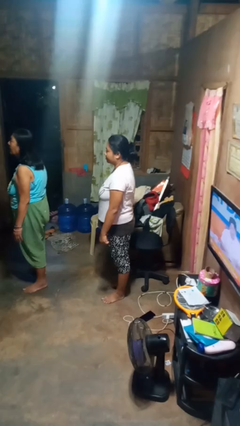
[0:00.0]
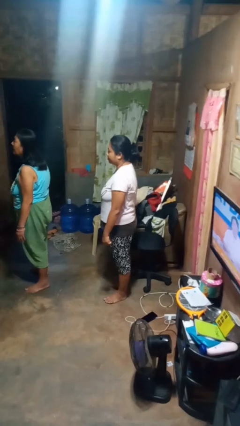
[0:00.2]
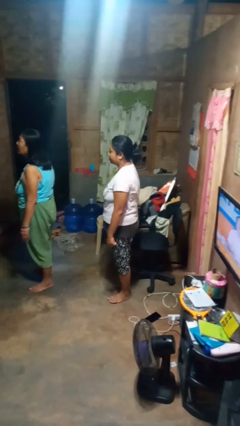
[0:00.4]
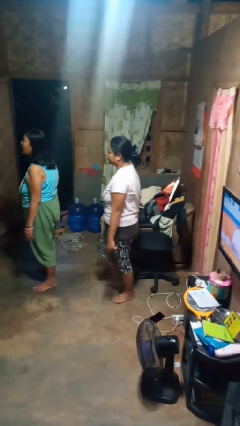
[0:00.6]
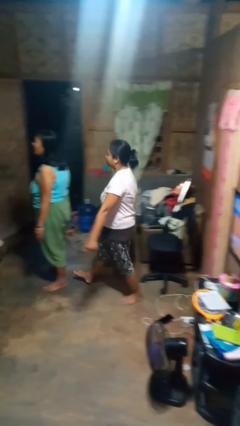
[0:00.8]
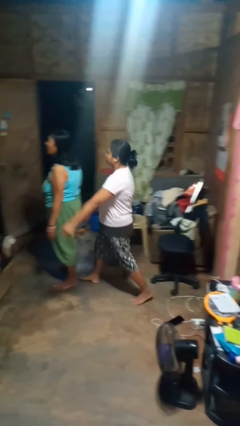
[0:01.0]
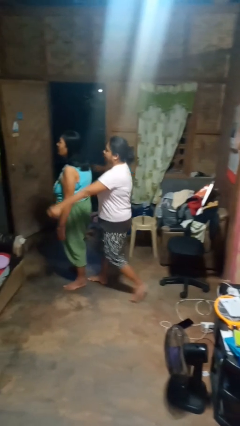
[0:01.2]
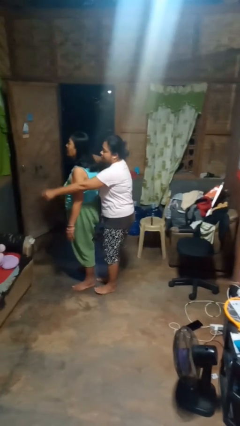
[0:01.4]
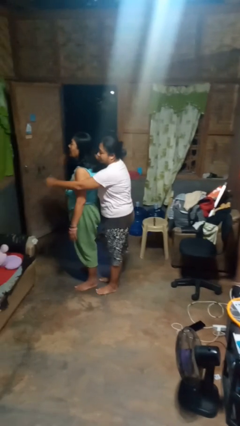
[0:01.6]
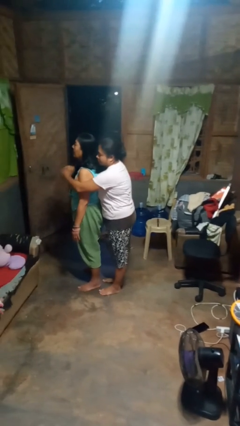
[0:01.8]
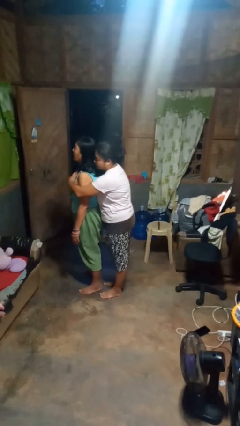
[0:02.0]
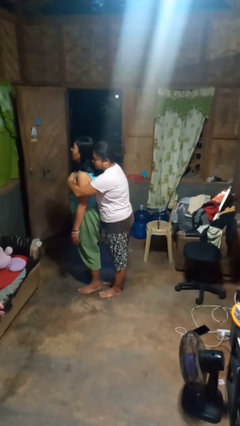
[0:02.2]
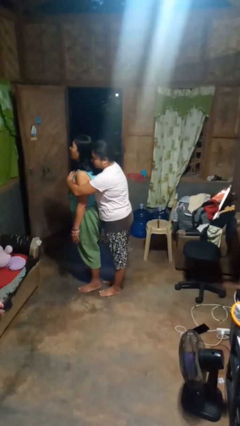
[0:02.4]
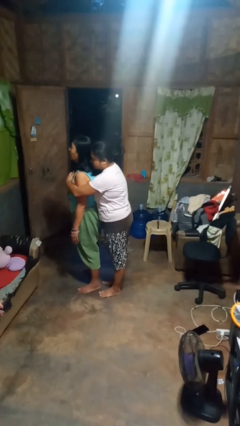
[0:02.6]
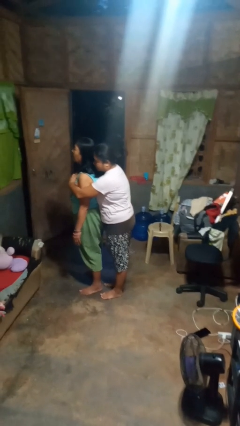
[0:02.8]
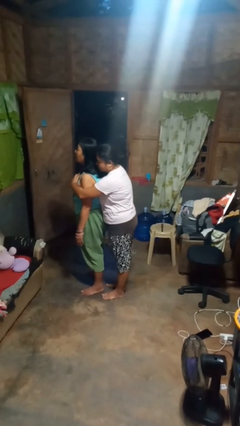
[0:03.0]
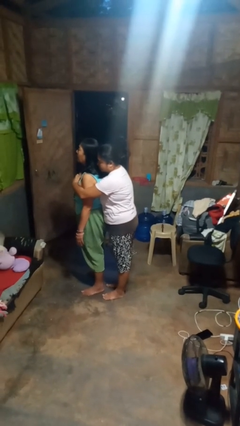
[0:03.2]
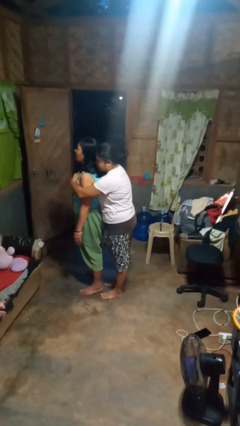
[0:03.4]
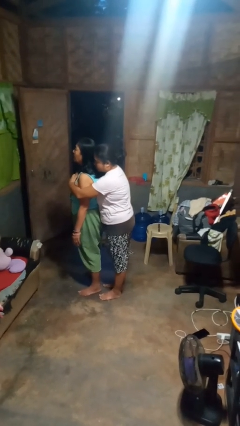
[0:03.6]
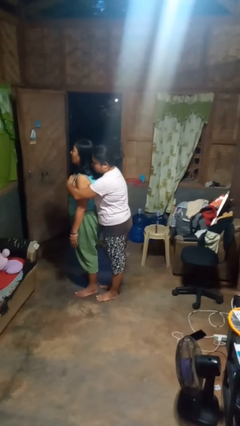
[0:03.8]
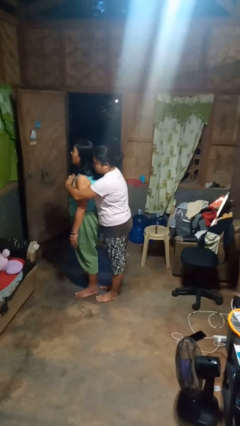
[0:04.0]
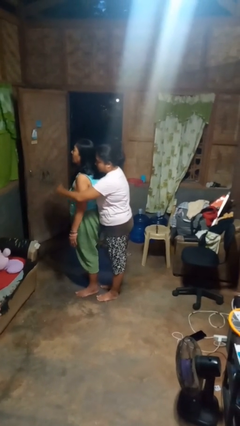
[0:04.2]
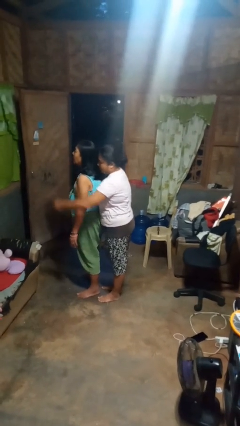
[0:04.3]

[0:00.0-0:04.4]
person hugs person from behind

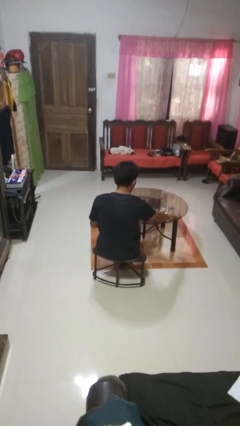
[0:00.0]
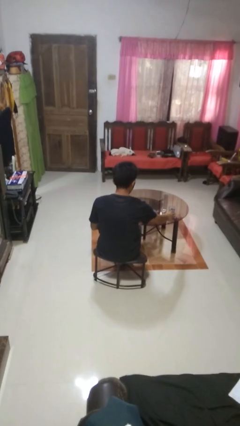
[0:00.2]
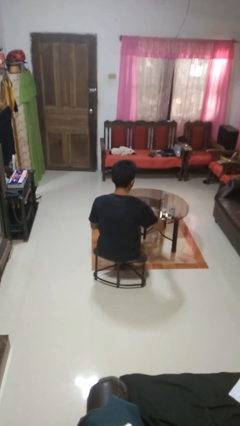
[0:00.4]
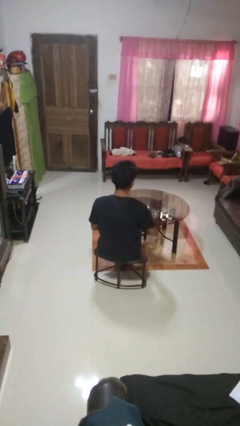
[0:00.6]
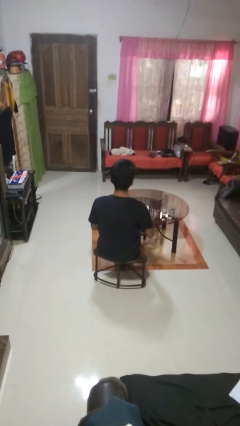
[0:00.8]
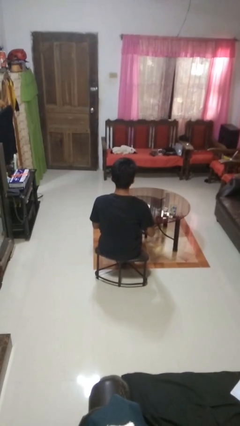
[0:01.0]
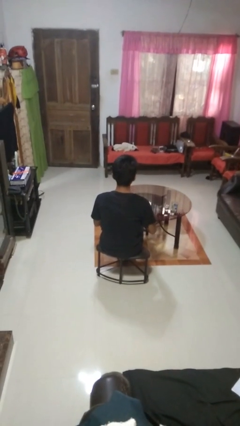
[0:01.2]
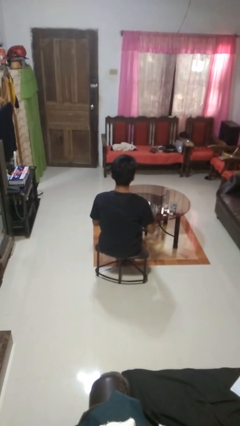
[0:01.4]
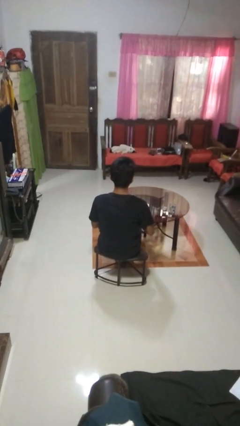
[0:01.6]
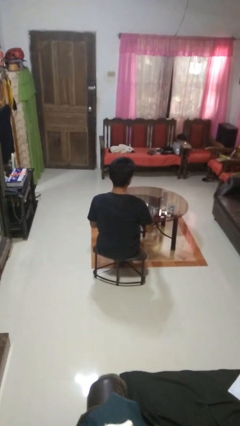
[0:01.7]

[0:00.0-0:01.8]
person puts down object on table

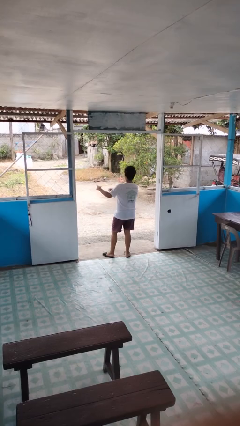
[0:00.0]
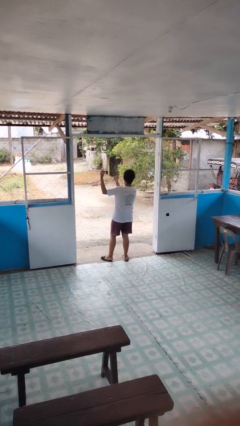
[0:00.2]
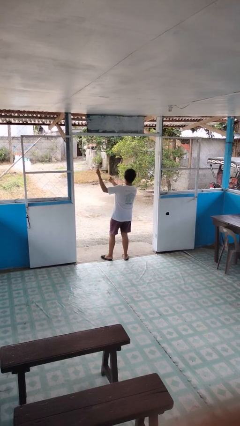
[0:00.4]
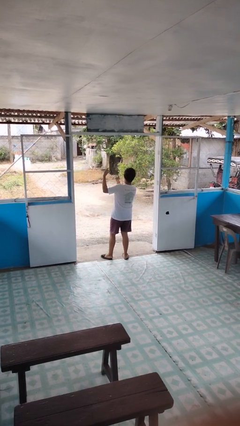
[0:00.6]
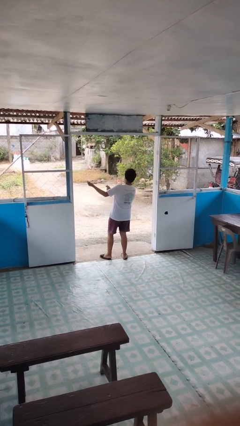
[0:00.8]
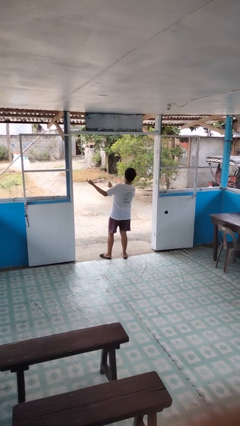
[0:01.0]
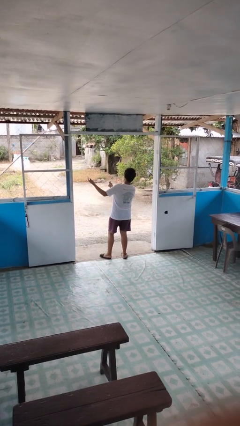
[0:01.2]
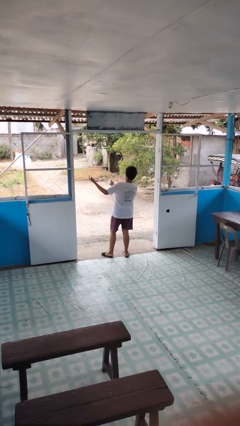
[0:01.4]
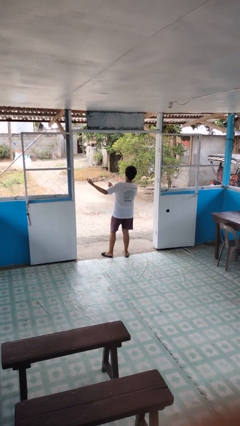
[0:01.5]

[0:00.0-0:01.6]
person snaps fingers

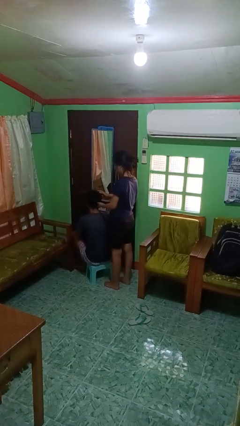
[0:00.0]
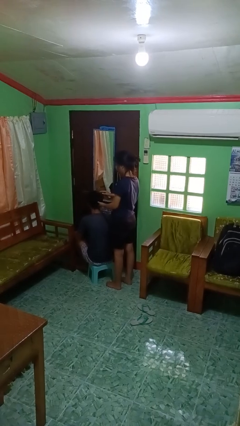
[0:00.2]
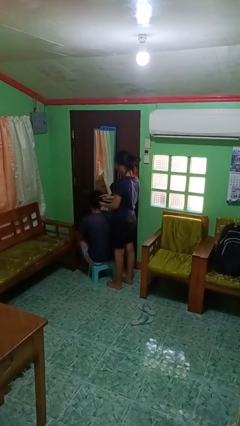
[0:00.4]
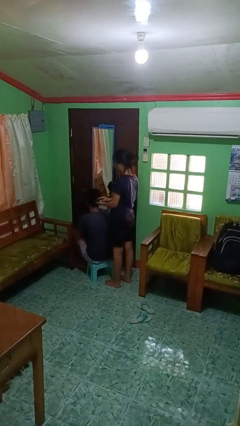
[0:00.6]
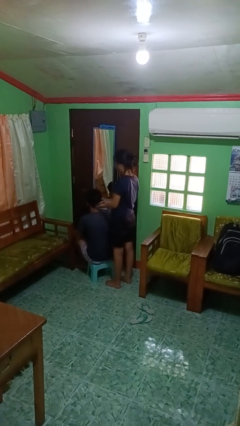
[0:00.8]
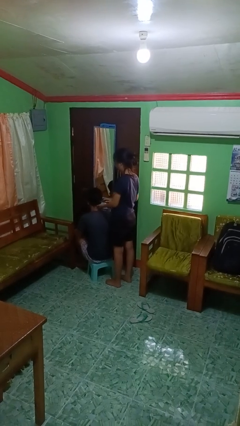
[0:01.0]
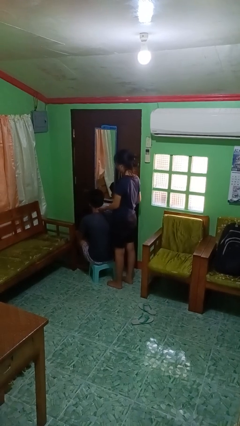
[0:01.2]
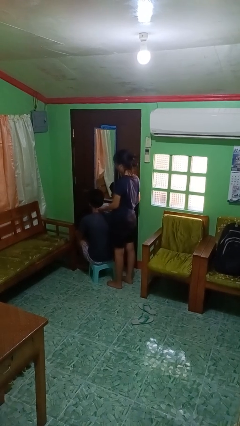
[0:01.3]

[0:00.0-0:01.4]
person brushes hair of person

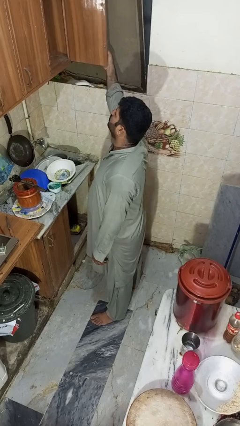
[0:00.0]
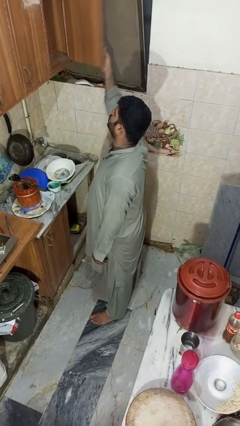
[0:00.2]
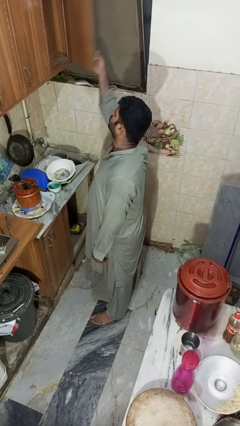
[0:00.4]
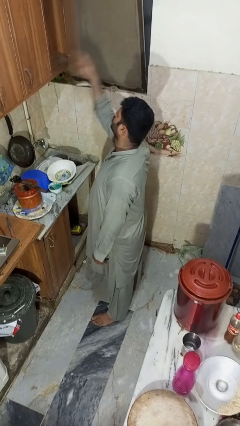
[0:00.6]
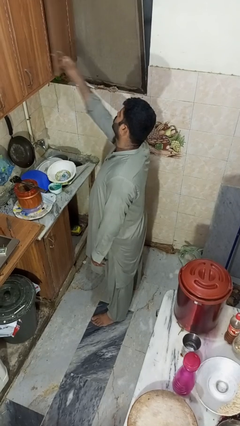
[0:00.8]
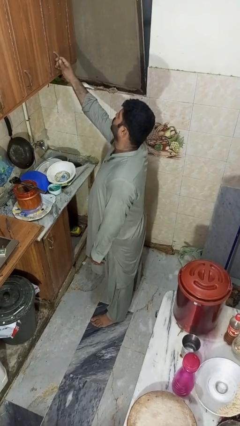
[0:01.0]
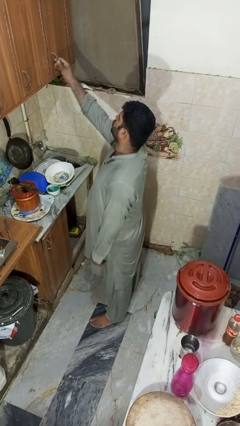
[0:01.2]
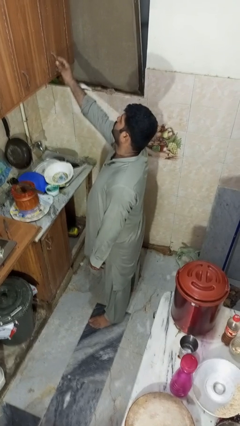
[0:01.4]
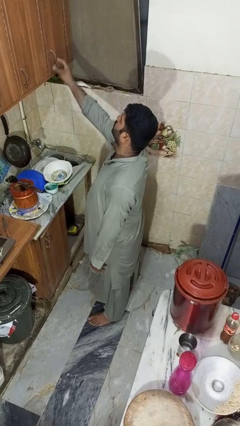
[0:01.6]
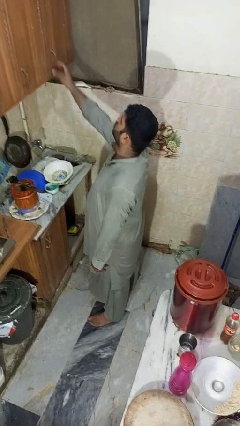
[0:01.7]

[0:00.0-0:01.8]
person closes cabinet

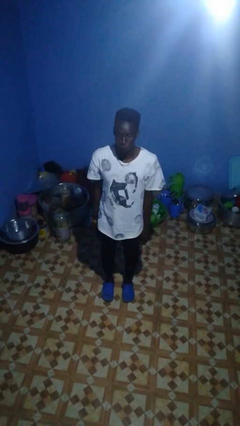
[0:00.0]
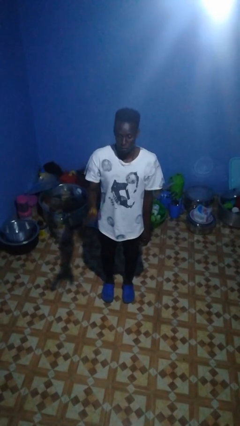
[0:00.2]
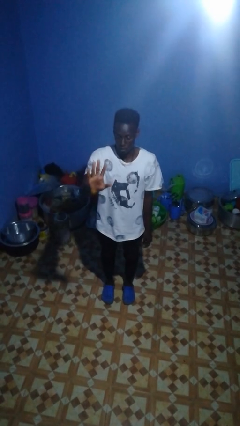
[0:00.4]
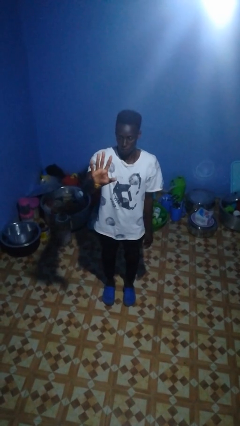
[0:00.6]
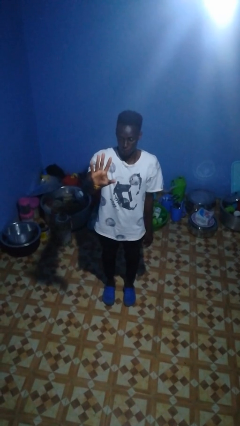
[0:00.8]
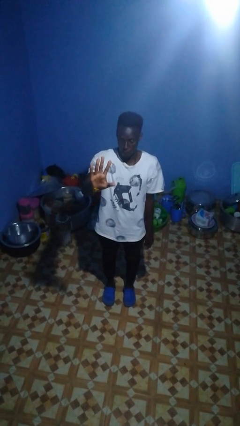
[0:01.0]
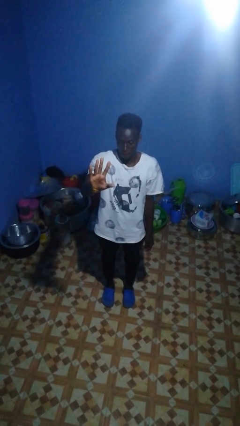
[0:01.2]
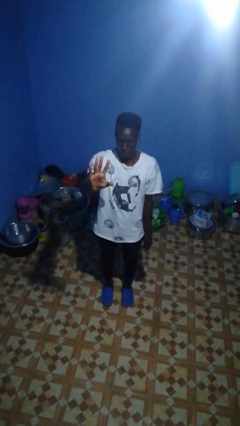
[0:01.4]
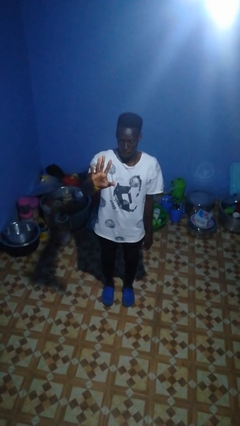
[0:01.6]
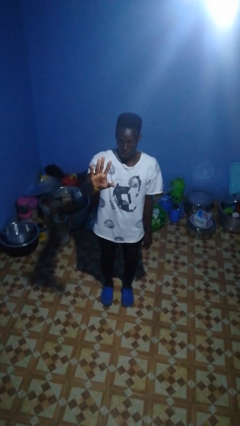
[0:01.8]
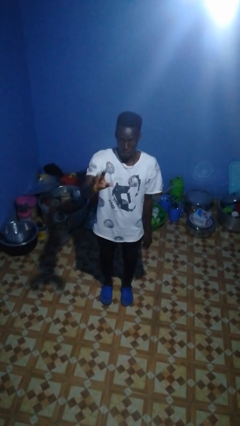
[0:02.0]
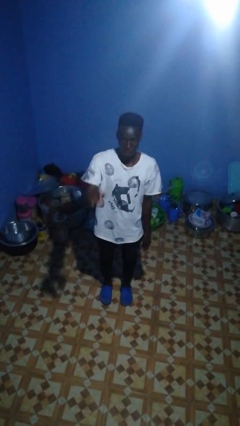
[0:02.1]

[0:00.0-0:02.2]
person gestures number five

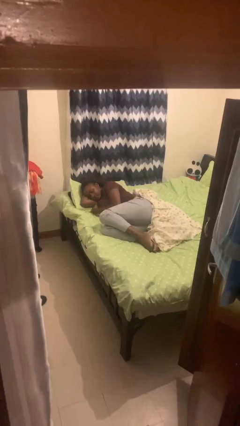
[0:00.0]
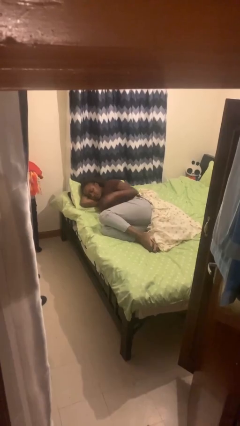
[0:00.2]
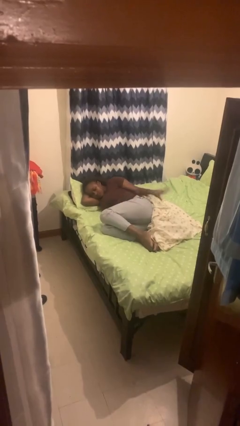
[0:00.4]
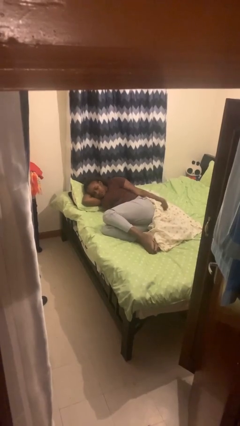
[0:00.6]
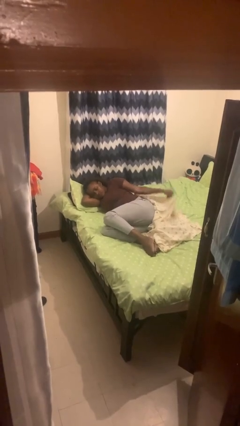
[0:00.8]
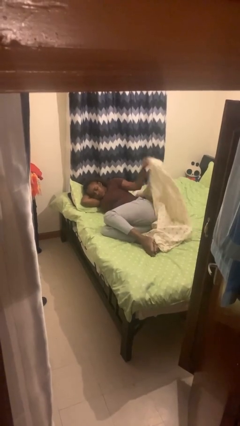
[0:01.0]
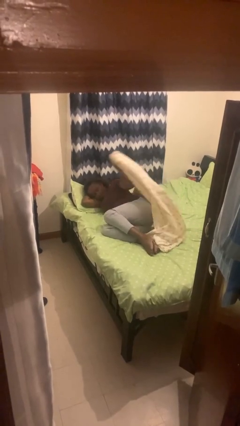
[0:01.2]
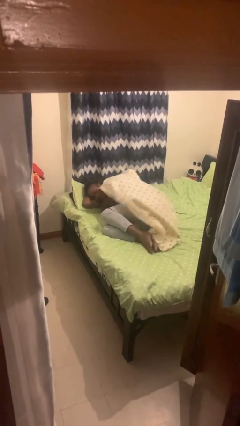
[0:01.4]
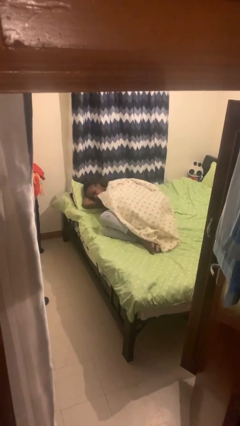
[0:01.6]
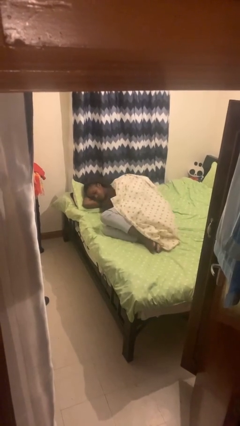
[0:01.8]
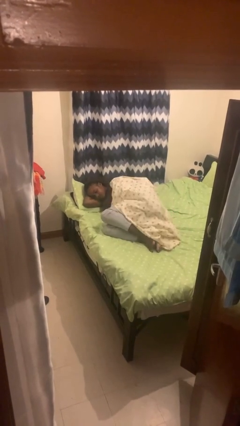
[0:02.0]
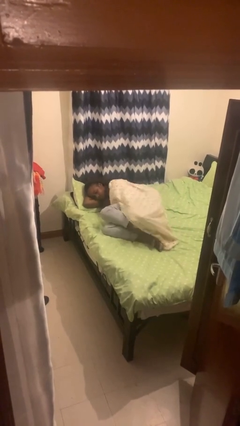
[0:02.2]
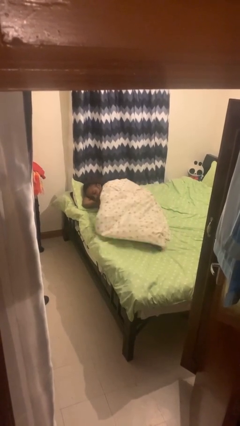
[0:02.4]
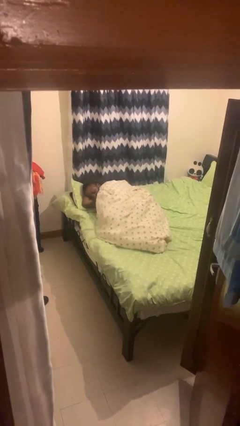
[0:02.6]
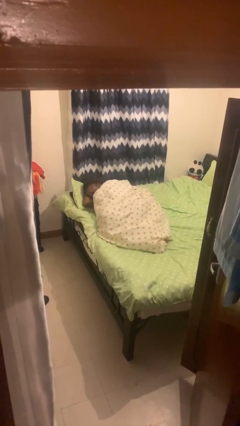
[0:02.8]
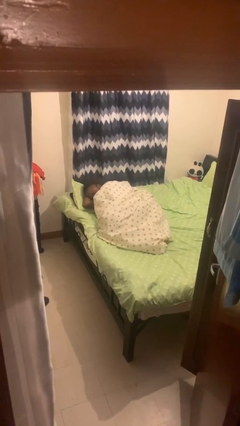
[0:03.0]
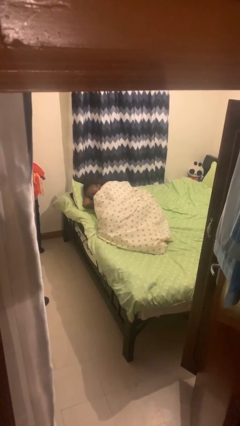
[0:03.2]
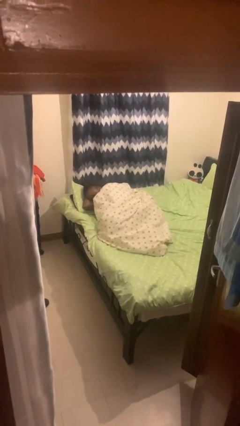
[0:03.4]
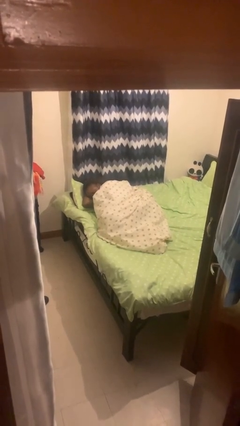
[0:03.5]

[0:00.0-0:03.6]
person covers with bedsheets

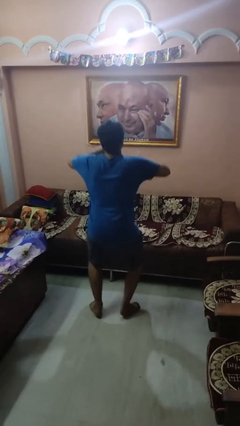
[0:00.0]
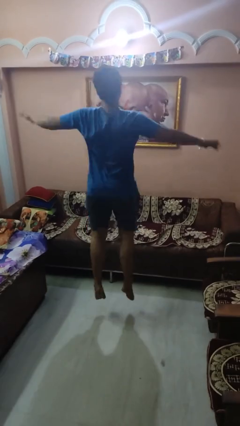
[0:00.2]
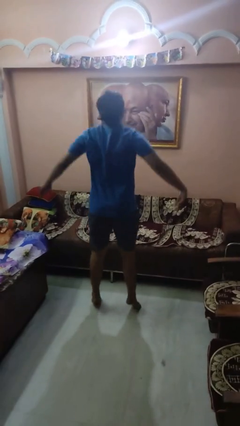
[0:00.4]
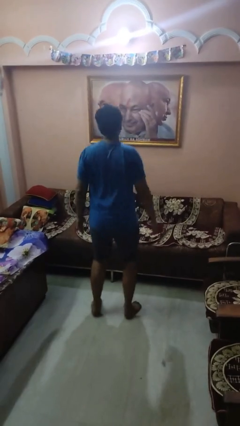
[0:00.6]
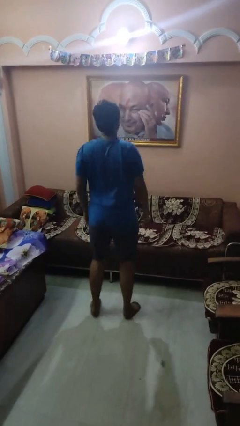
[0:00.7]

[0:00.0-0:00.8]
person jumps
